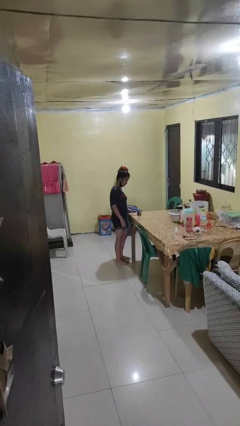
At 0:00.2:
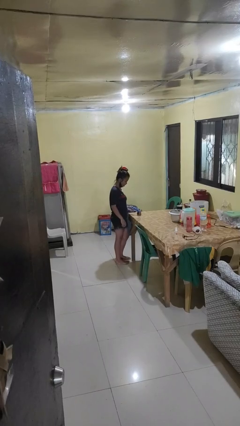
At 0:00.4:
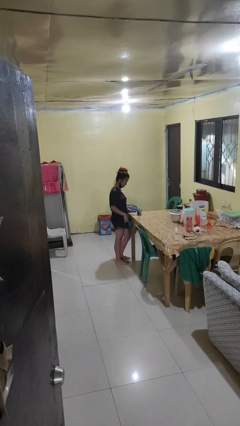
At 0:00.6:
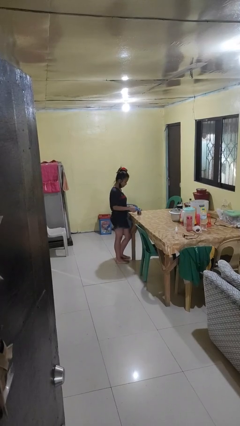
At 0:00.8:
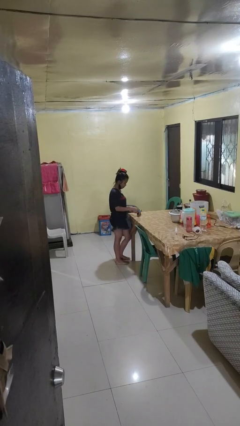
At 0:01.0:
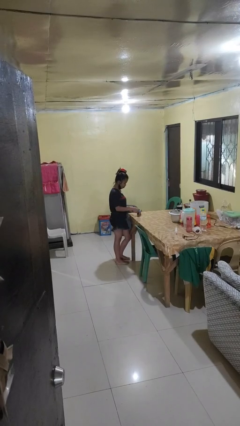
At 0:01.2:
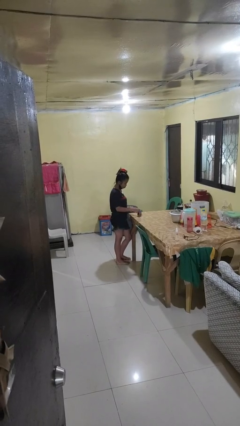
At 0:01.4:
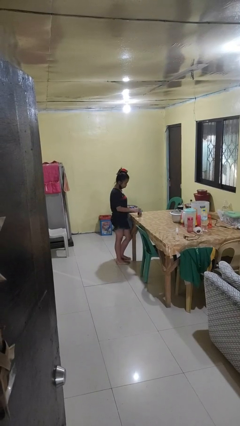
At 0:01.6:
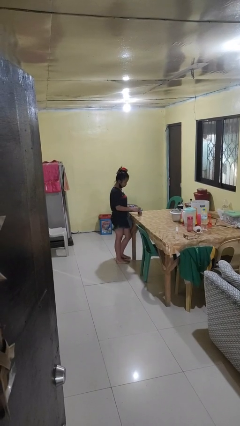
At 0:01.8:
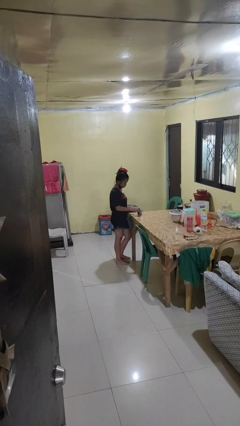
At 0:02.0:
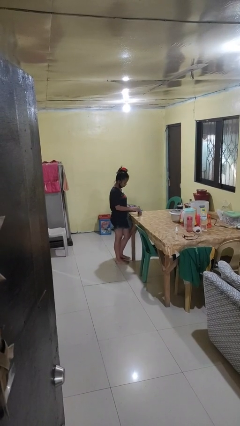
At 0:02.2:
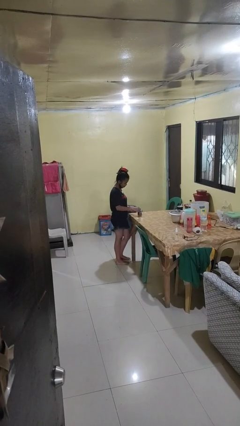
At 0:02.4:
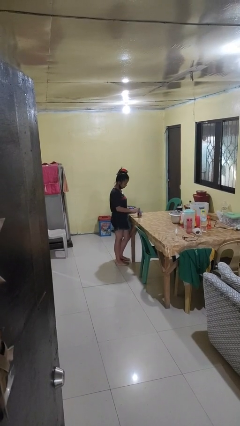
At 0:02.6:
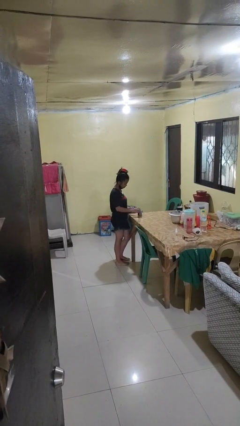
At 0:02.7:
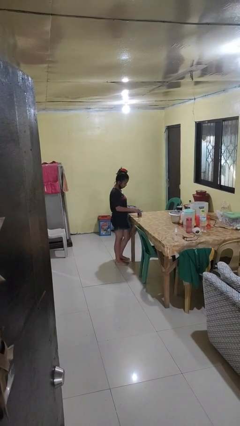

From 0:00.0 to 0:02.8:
person opens can with can opener

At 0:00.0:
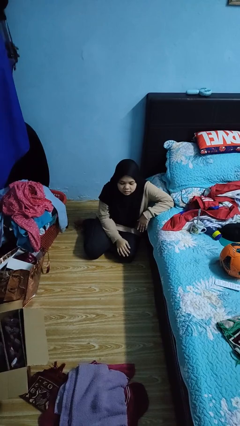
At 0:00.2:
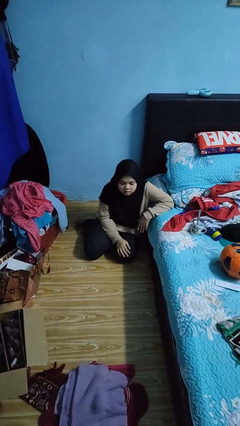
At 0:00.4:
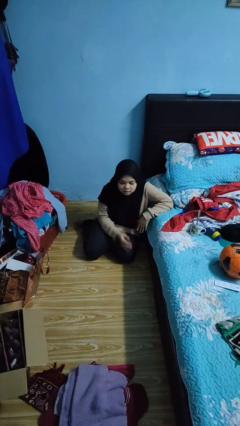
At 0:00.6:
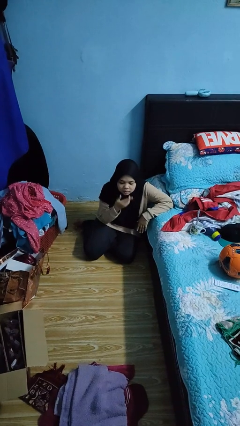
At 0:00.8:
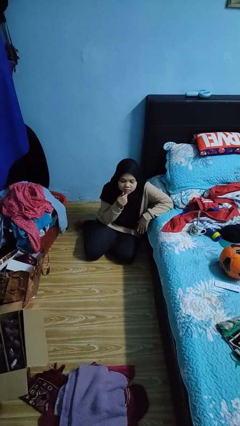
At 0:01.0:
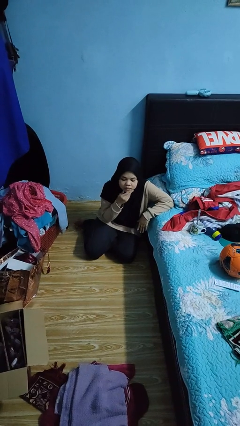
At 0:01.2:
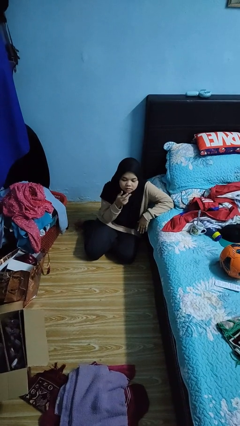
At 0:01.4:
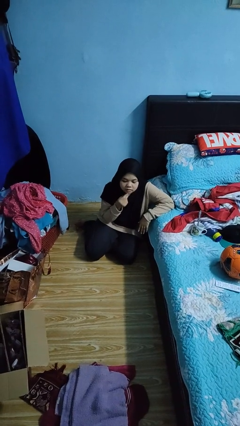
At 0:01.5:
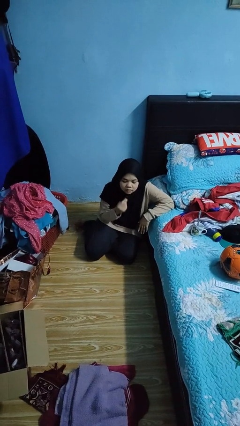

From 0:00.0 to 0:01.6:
person strokes chin

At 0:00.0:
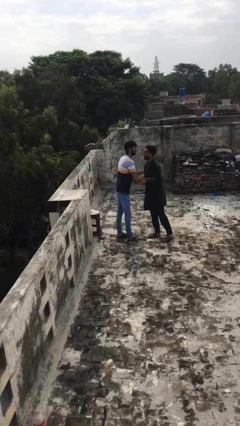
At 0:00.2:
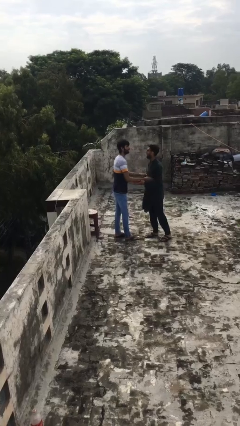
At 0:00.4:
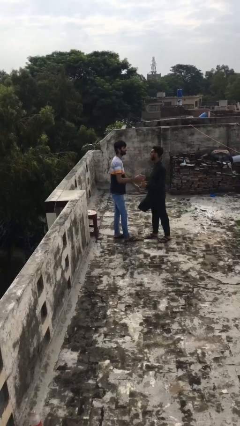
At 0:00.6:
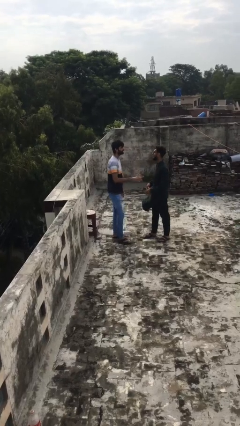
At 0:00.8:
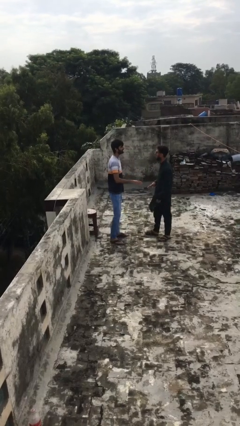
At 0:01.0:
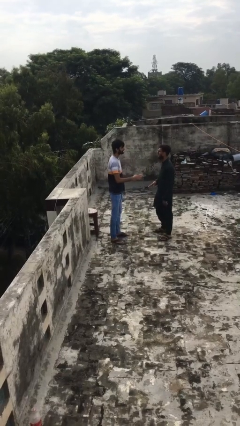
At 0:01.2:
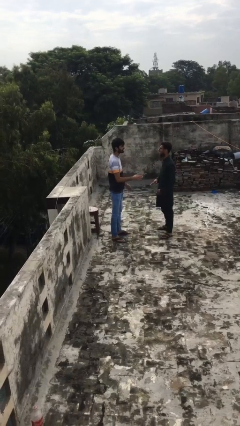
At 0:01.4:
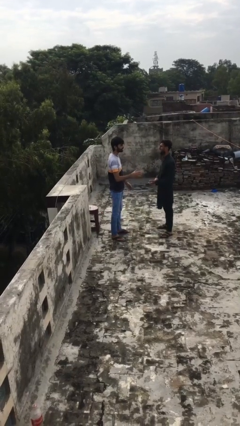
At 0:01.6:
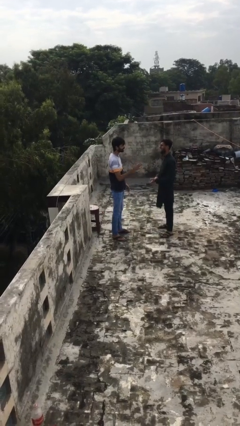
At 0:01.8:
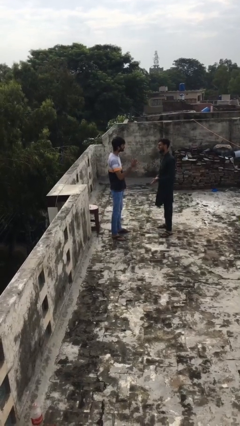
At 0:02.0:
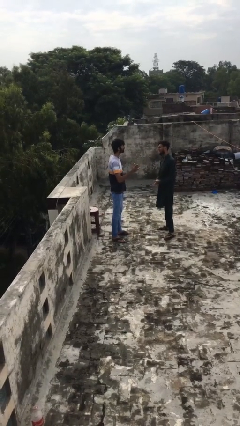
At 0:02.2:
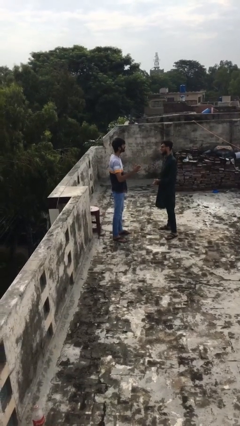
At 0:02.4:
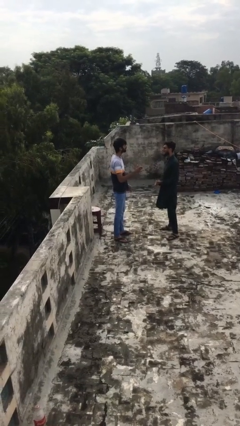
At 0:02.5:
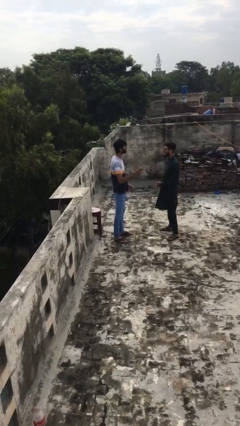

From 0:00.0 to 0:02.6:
person talks to person

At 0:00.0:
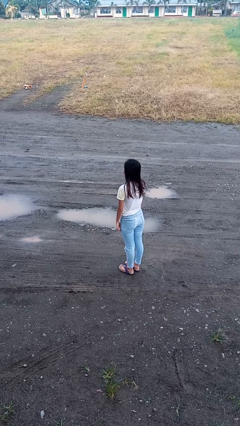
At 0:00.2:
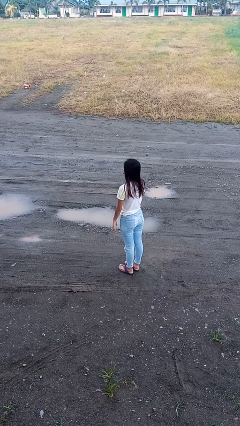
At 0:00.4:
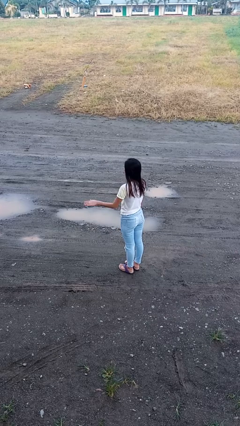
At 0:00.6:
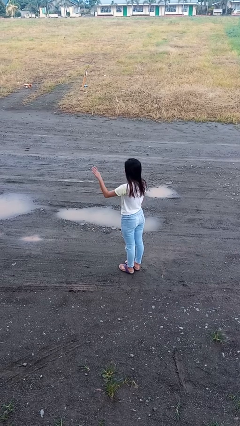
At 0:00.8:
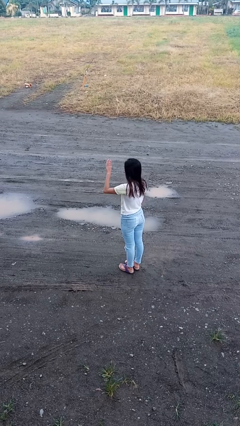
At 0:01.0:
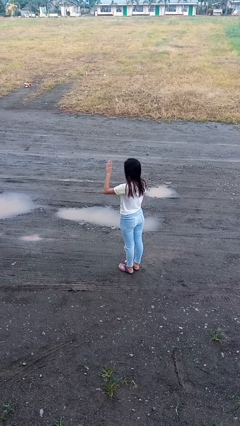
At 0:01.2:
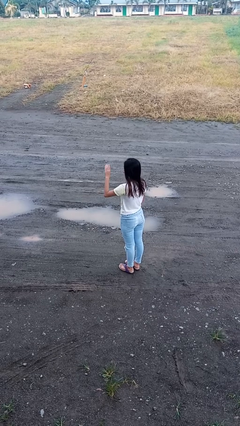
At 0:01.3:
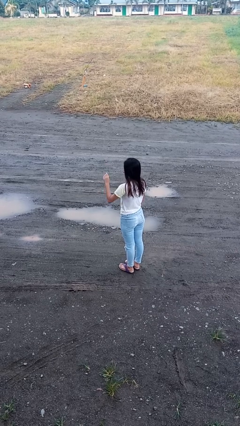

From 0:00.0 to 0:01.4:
person gestures swipe right

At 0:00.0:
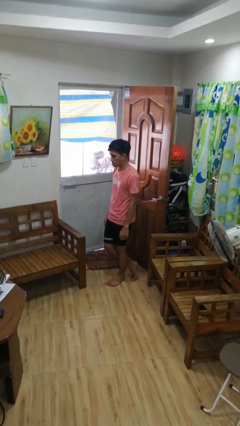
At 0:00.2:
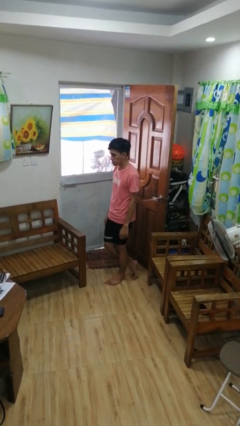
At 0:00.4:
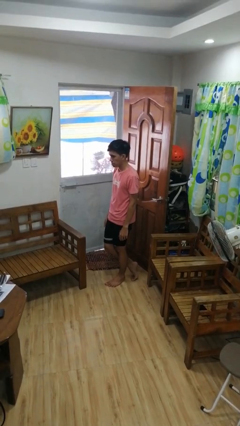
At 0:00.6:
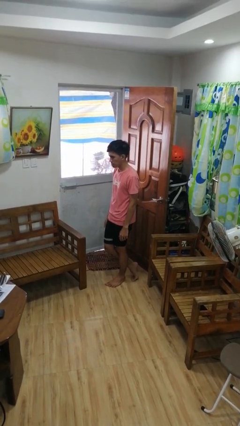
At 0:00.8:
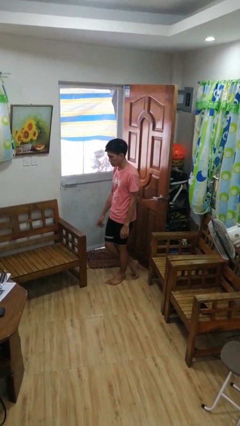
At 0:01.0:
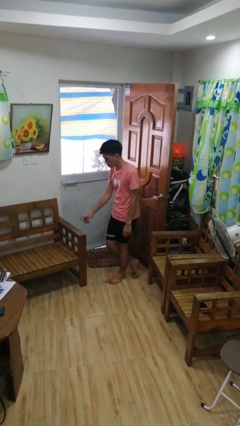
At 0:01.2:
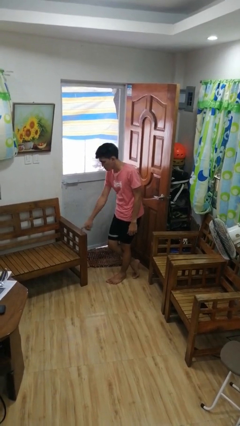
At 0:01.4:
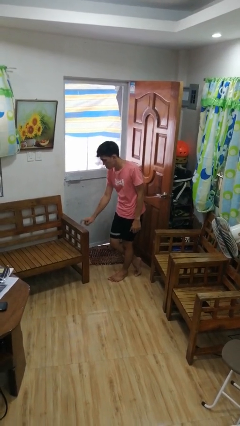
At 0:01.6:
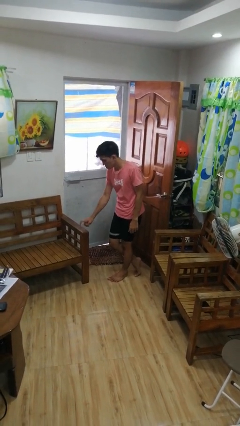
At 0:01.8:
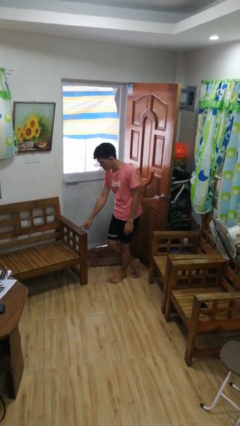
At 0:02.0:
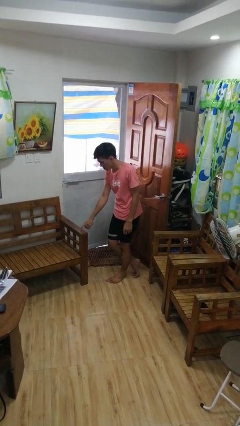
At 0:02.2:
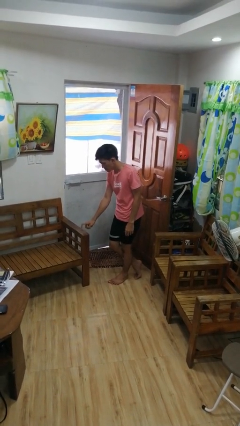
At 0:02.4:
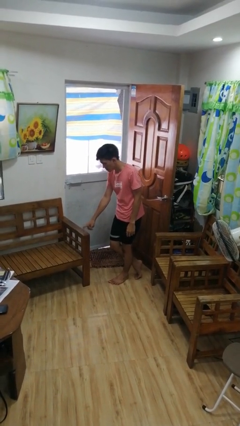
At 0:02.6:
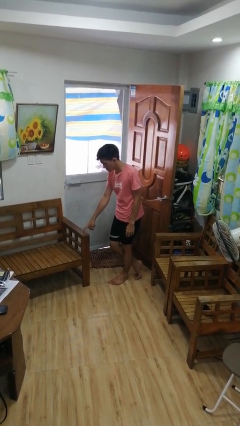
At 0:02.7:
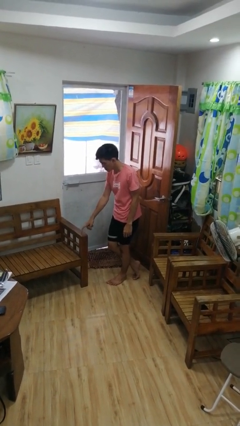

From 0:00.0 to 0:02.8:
person taps object with finger

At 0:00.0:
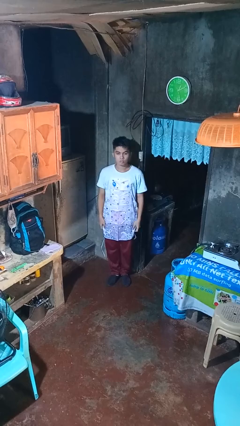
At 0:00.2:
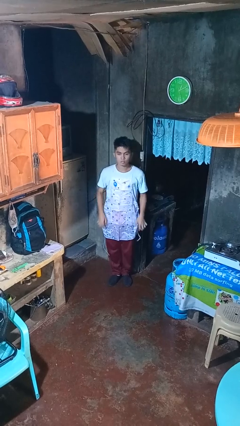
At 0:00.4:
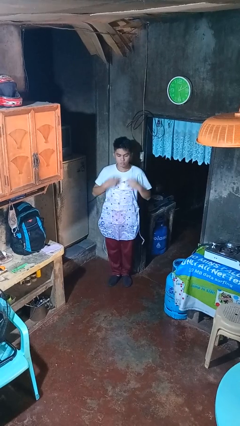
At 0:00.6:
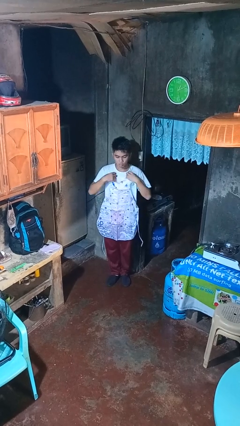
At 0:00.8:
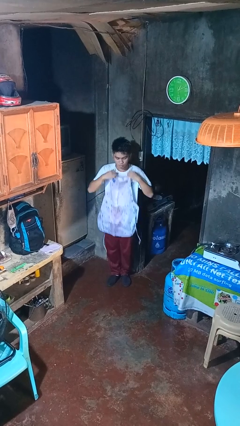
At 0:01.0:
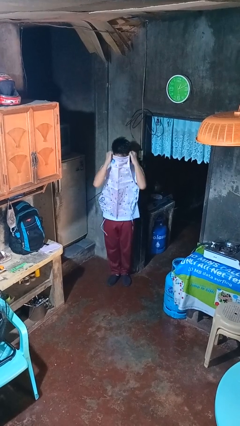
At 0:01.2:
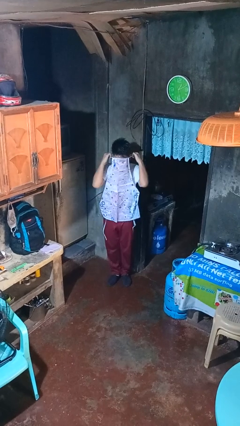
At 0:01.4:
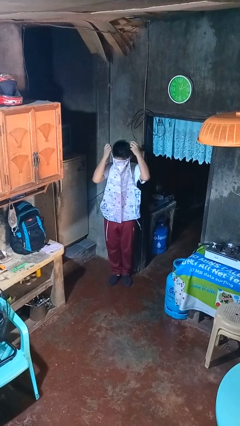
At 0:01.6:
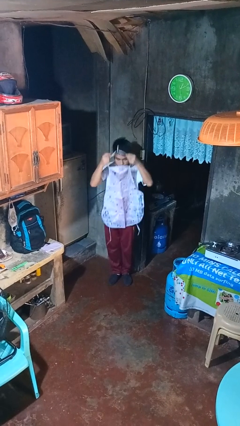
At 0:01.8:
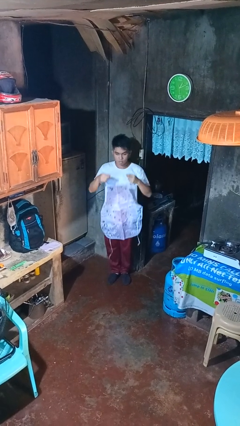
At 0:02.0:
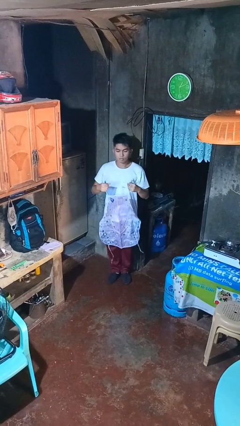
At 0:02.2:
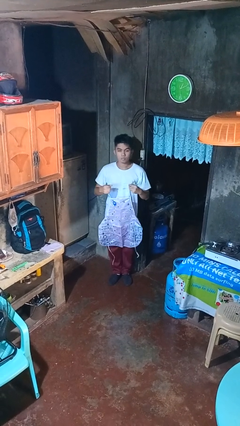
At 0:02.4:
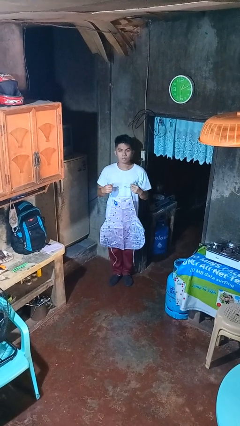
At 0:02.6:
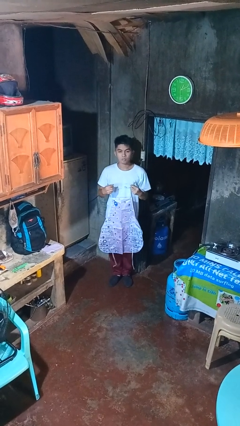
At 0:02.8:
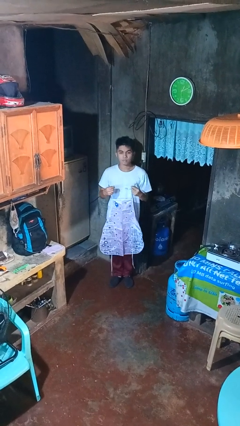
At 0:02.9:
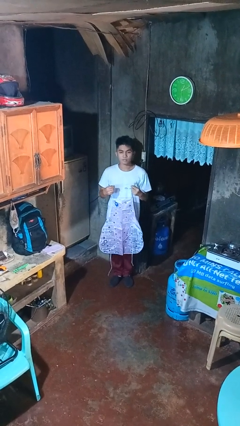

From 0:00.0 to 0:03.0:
person takes off apron

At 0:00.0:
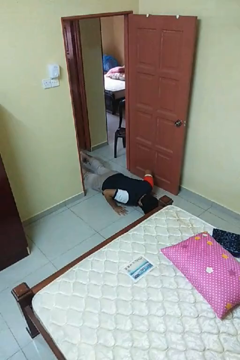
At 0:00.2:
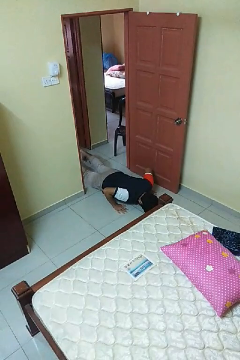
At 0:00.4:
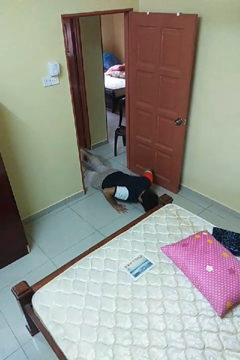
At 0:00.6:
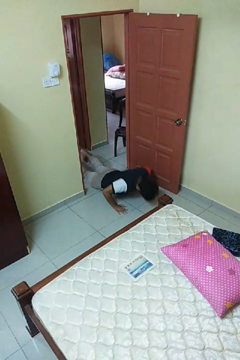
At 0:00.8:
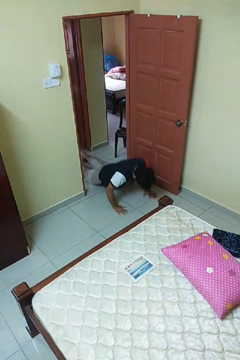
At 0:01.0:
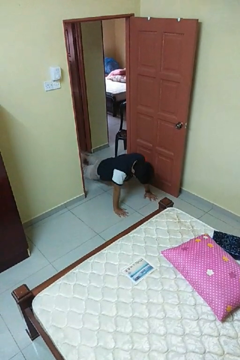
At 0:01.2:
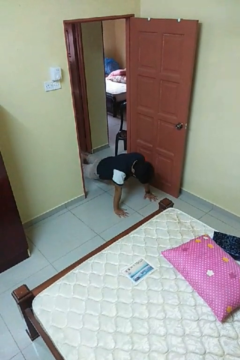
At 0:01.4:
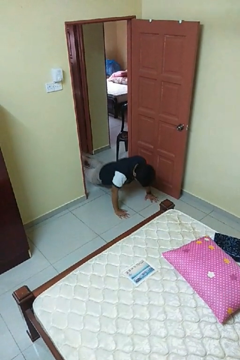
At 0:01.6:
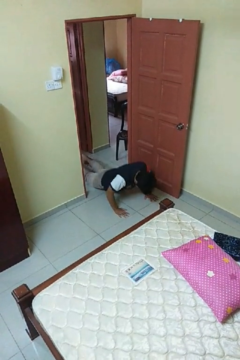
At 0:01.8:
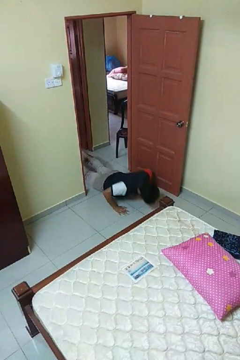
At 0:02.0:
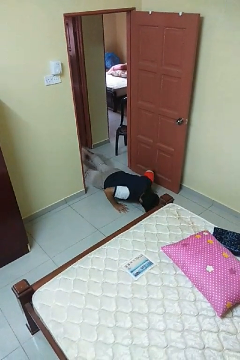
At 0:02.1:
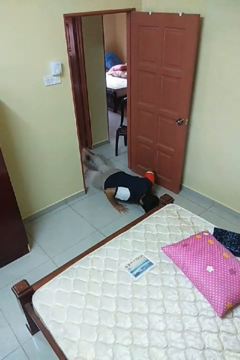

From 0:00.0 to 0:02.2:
person exercises with pushup

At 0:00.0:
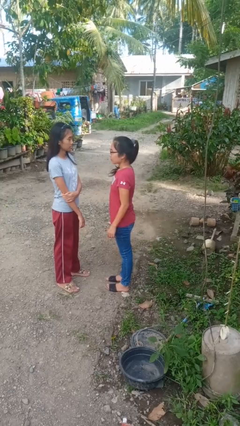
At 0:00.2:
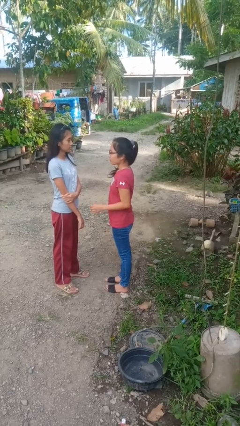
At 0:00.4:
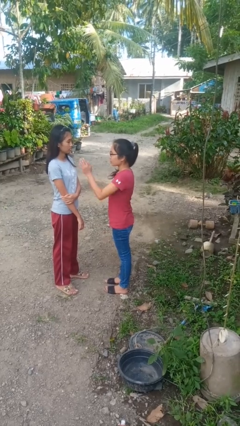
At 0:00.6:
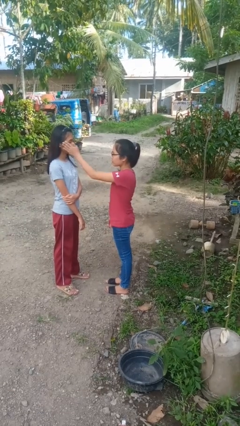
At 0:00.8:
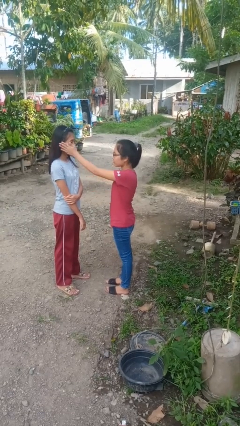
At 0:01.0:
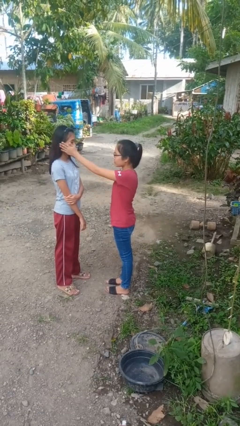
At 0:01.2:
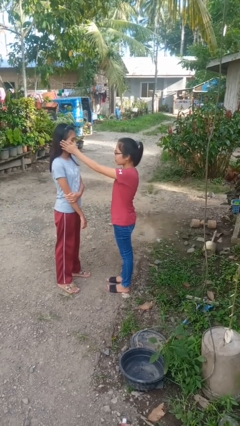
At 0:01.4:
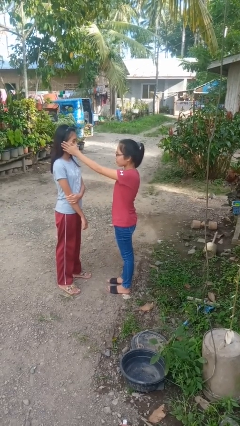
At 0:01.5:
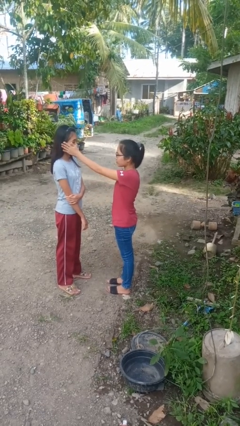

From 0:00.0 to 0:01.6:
person touches face of person
